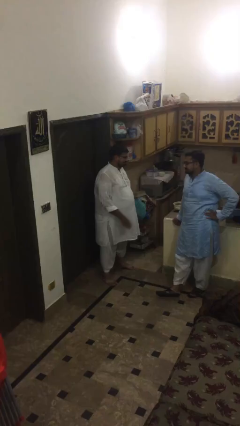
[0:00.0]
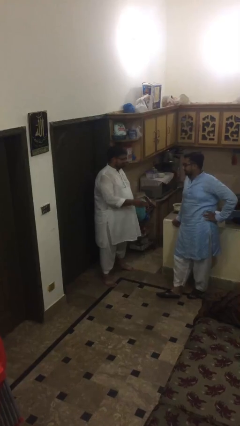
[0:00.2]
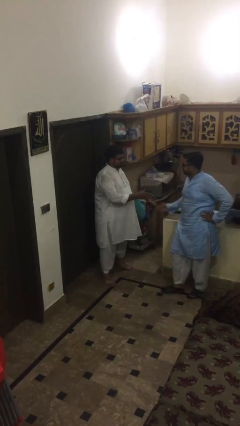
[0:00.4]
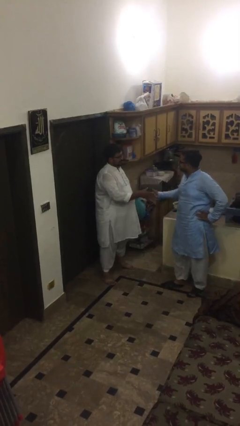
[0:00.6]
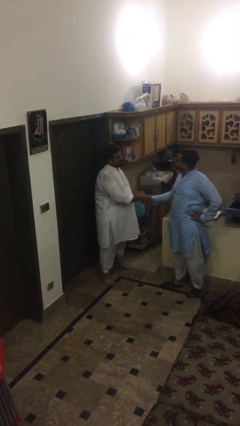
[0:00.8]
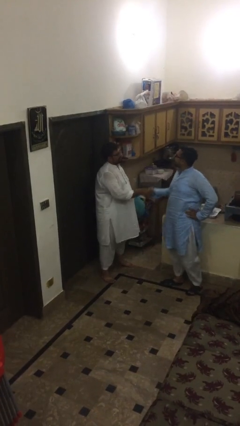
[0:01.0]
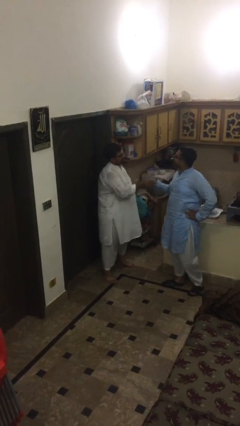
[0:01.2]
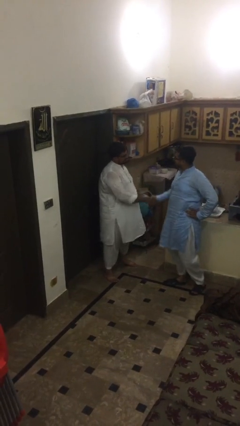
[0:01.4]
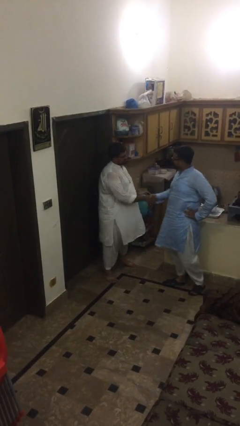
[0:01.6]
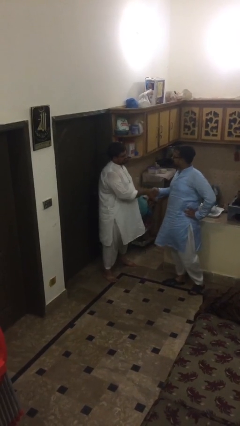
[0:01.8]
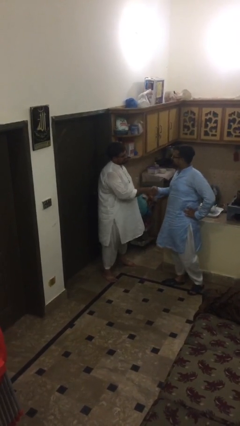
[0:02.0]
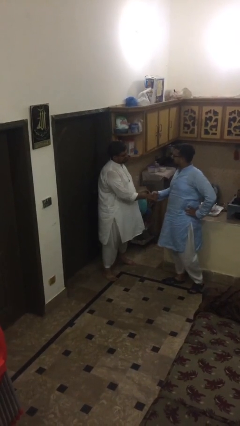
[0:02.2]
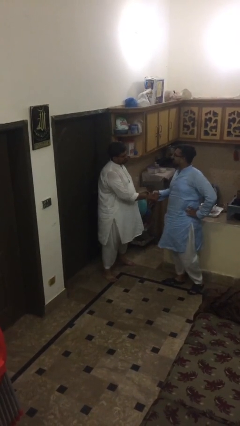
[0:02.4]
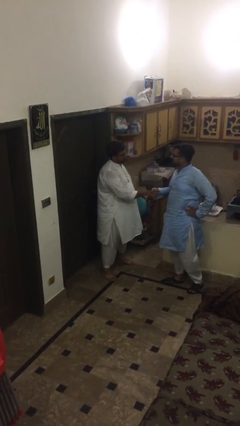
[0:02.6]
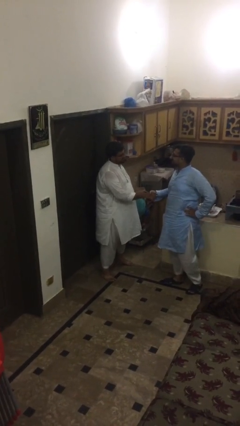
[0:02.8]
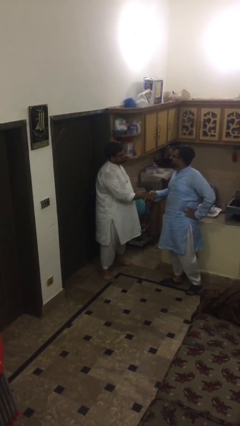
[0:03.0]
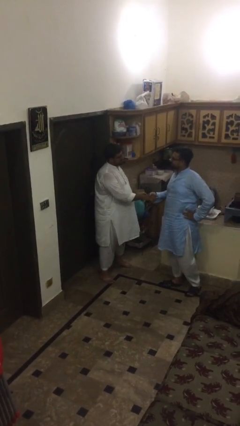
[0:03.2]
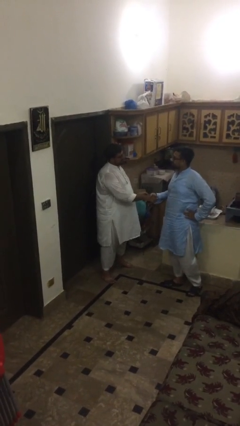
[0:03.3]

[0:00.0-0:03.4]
person shakes hand

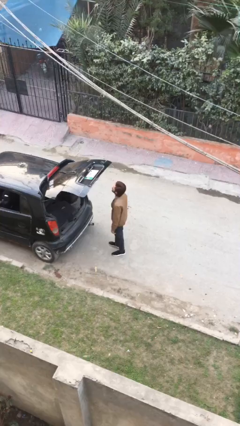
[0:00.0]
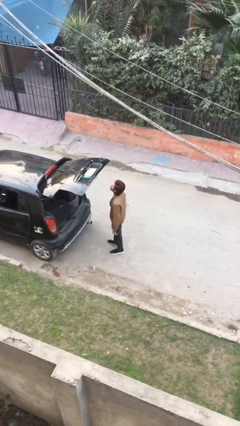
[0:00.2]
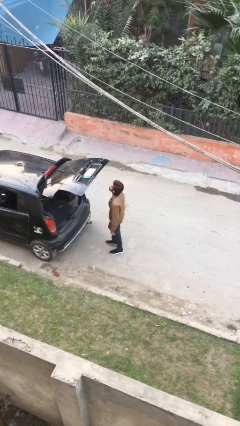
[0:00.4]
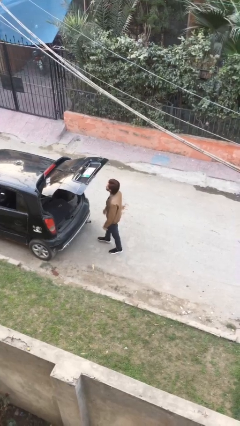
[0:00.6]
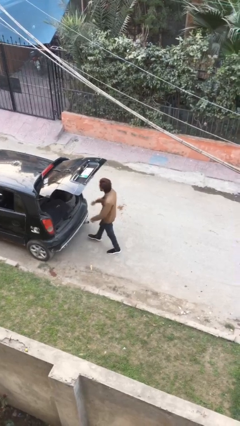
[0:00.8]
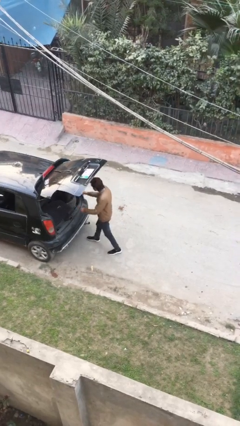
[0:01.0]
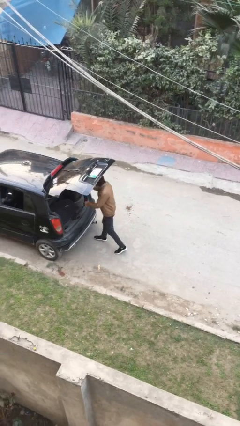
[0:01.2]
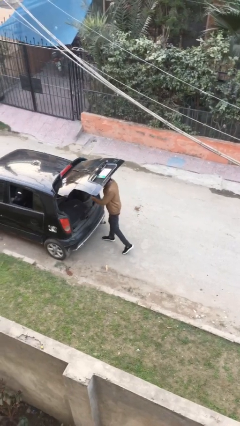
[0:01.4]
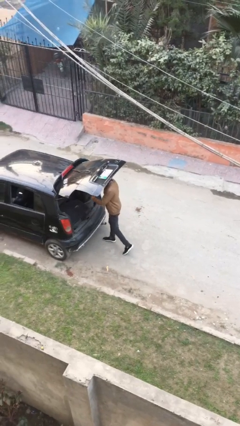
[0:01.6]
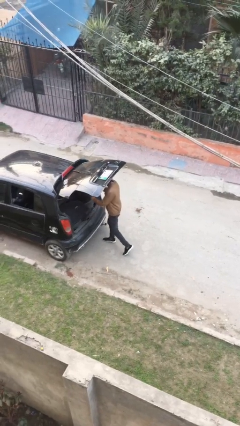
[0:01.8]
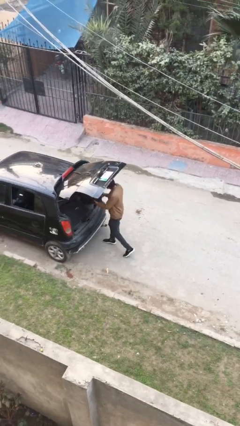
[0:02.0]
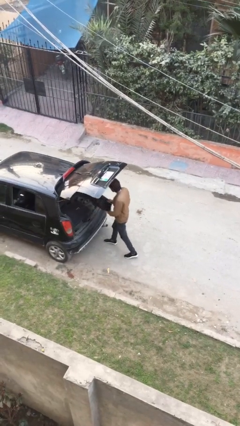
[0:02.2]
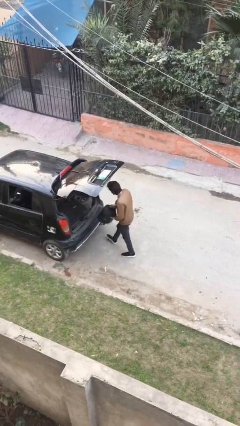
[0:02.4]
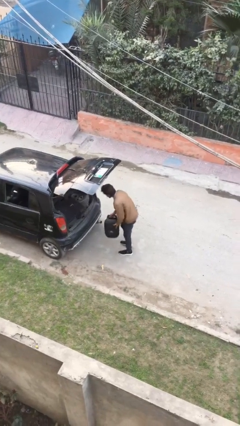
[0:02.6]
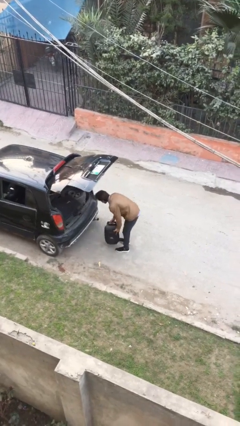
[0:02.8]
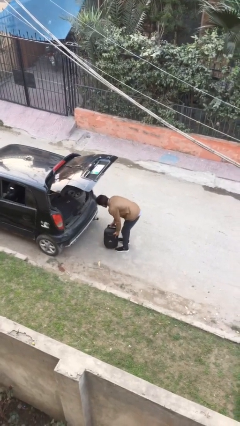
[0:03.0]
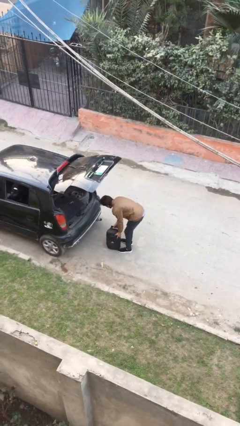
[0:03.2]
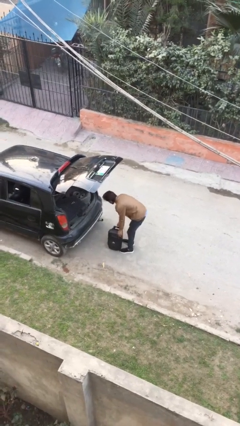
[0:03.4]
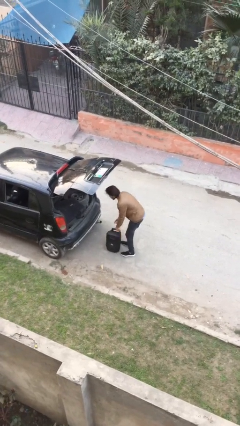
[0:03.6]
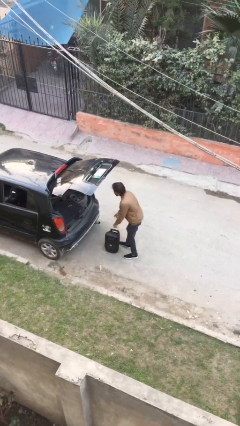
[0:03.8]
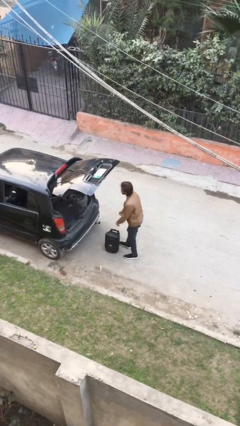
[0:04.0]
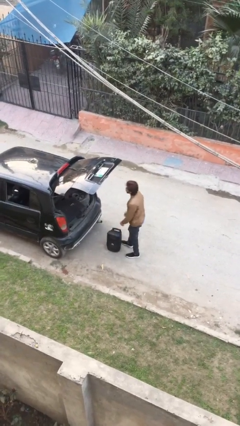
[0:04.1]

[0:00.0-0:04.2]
person unloads car

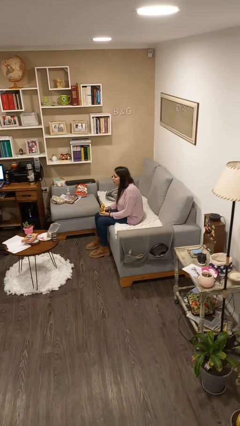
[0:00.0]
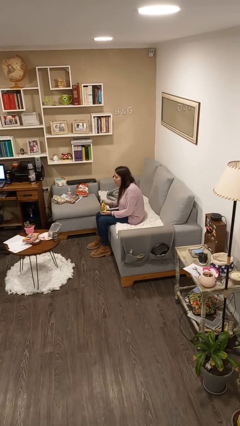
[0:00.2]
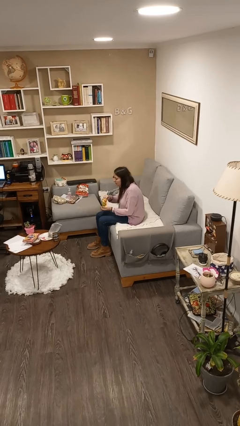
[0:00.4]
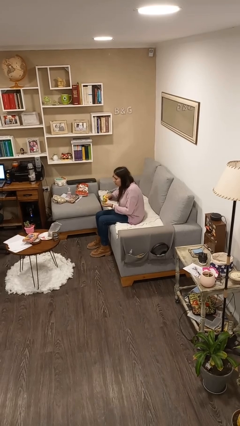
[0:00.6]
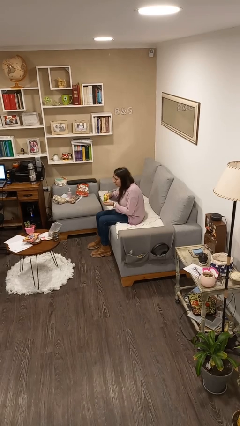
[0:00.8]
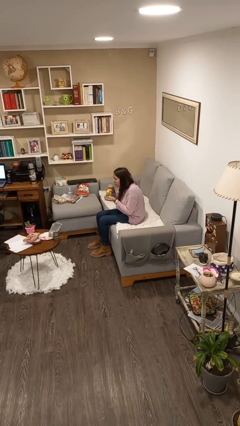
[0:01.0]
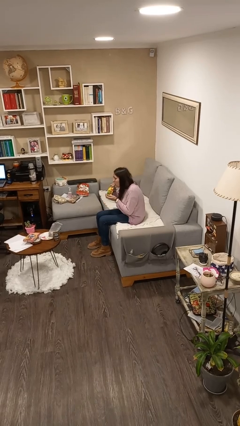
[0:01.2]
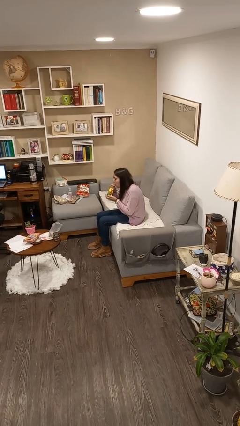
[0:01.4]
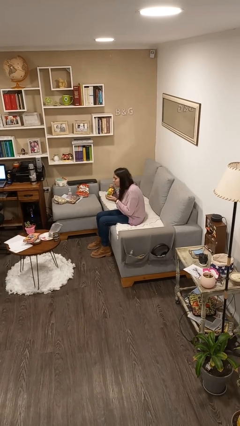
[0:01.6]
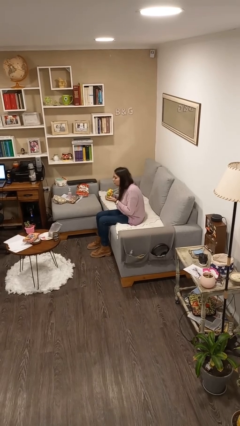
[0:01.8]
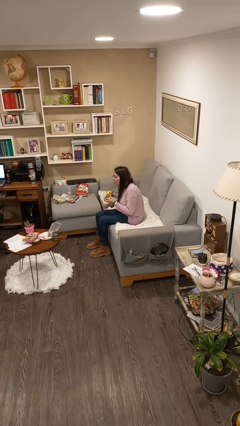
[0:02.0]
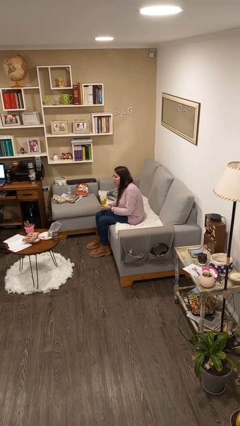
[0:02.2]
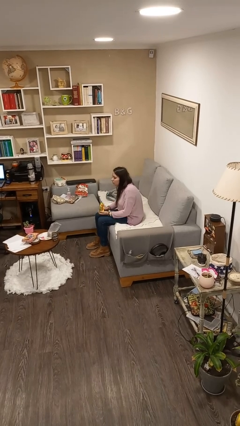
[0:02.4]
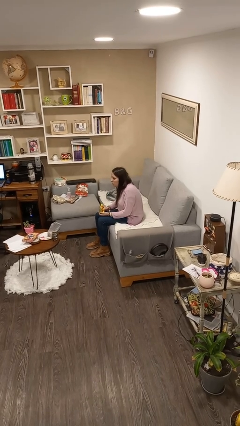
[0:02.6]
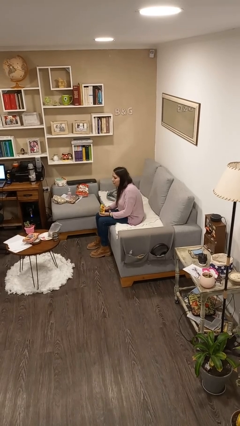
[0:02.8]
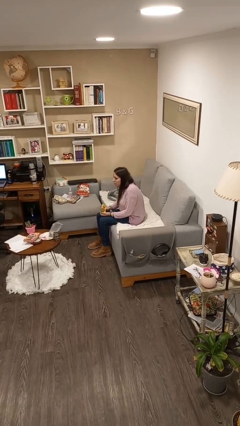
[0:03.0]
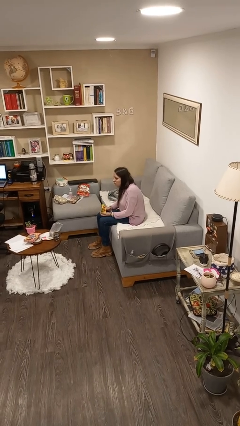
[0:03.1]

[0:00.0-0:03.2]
person eats snack from bag

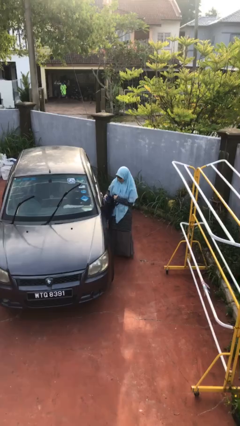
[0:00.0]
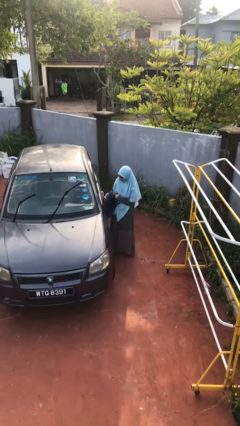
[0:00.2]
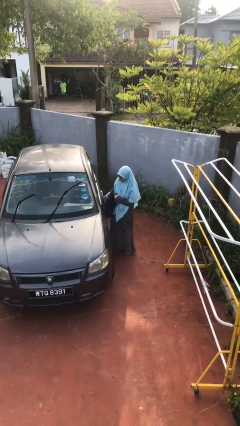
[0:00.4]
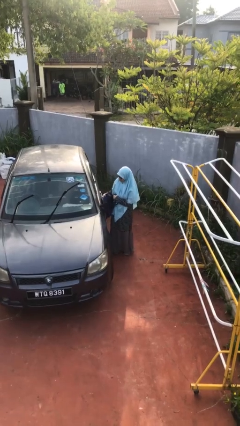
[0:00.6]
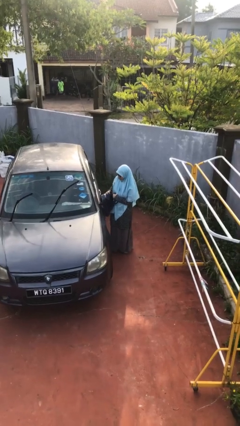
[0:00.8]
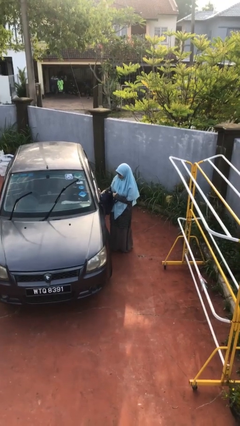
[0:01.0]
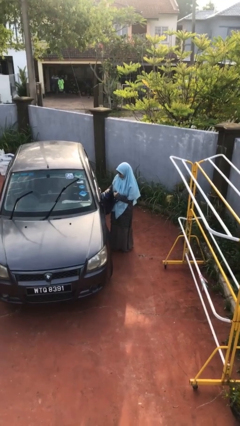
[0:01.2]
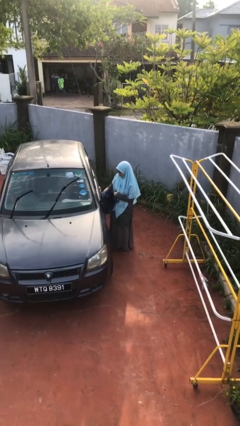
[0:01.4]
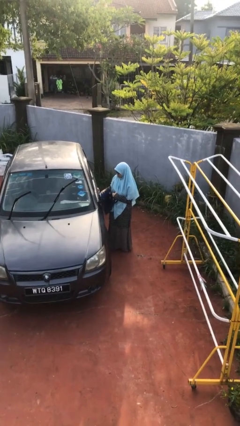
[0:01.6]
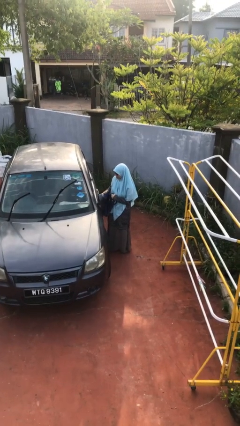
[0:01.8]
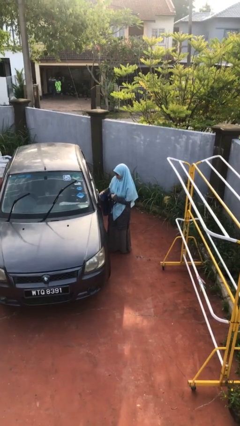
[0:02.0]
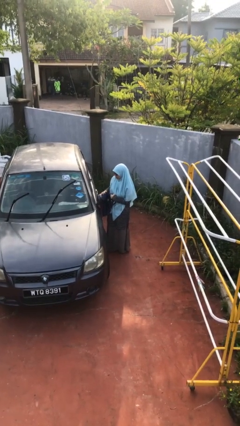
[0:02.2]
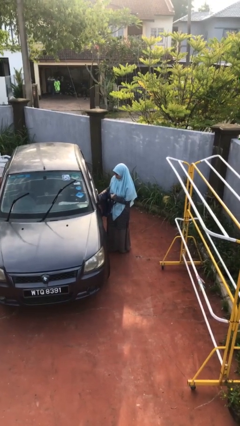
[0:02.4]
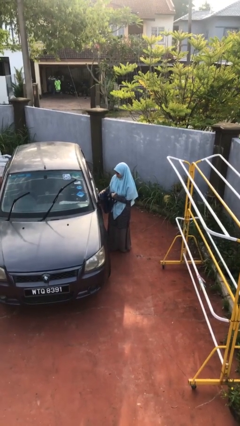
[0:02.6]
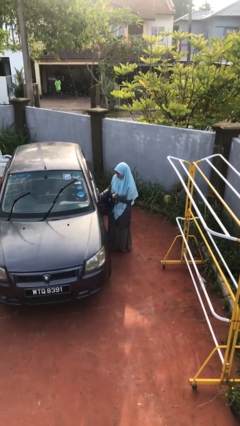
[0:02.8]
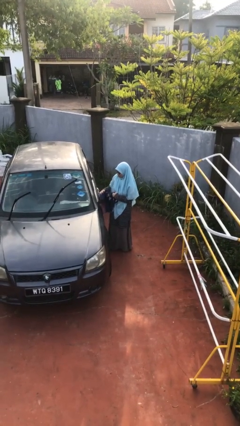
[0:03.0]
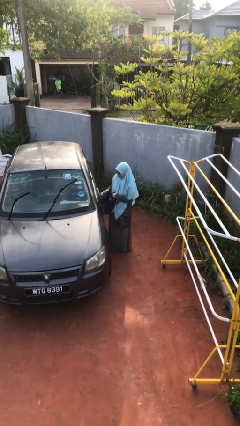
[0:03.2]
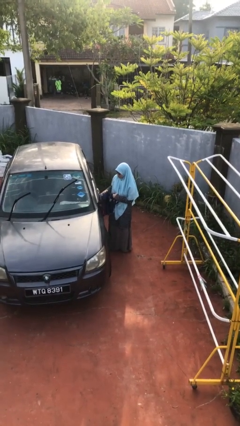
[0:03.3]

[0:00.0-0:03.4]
person polishes car with rag

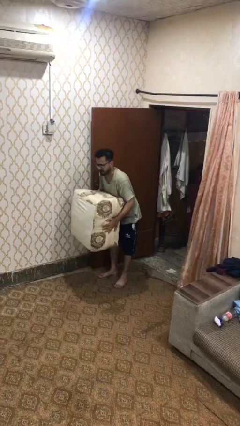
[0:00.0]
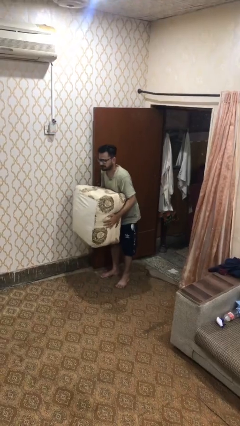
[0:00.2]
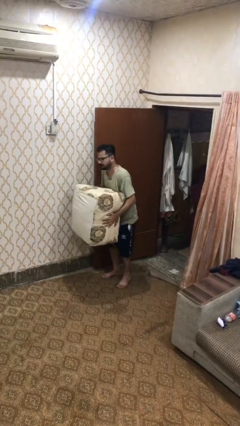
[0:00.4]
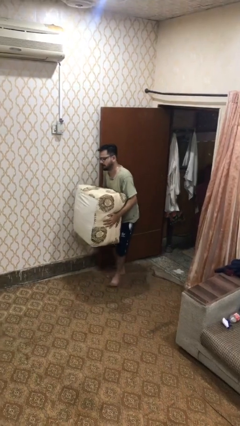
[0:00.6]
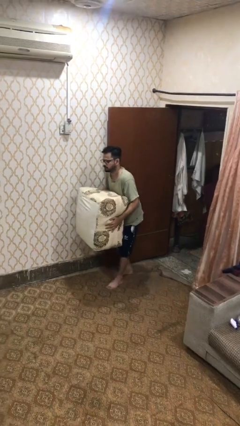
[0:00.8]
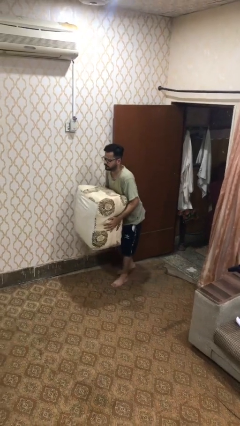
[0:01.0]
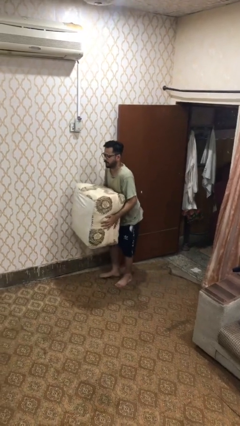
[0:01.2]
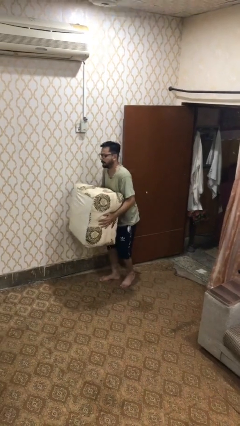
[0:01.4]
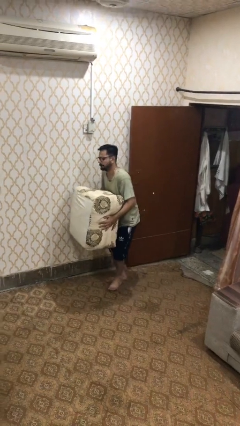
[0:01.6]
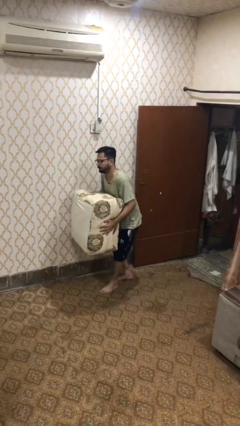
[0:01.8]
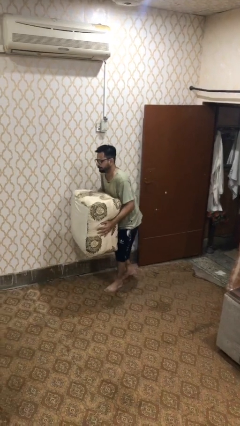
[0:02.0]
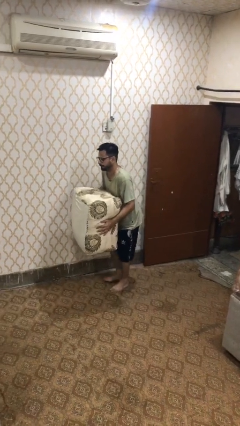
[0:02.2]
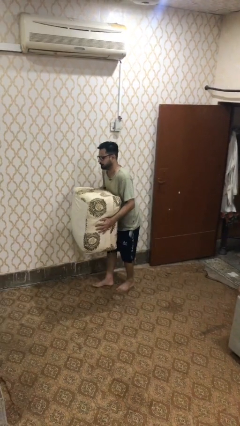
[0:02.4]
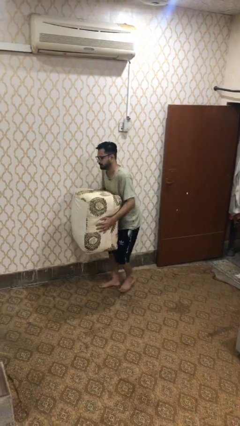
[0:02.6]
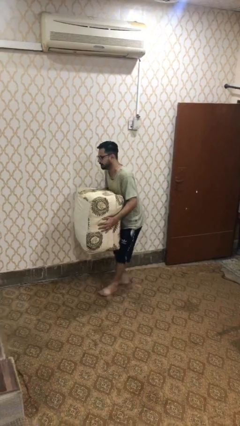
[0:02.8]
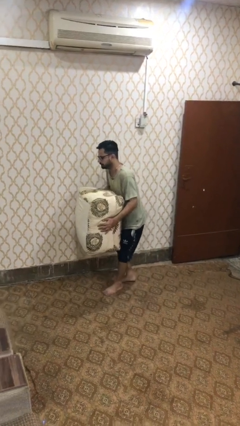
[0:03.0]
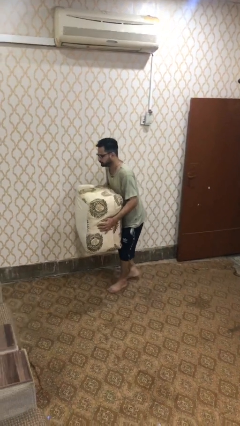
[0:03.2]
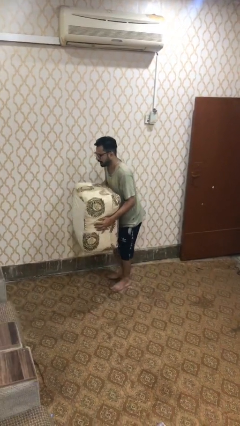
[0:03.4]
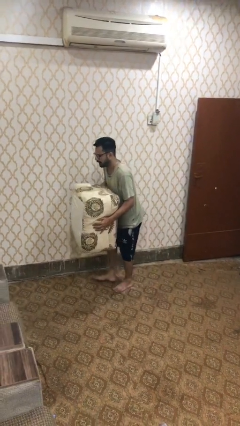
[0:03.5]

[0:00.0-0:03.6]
person carries heavy object
